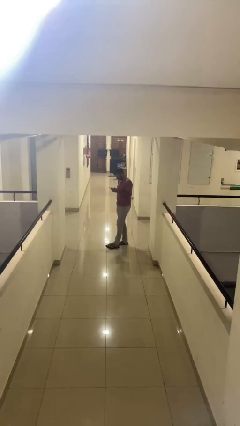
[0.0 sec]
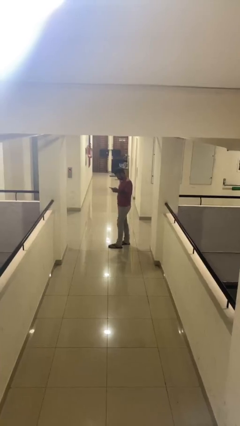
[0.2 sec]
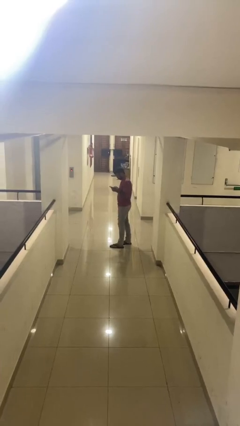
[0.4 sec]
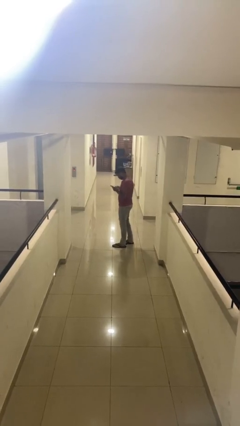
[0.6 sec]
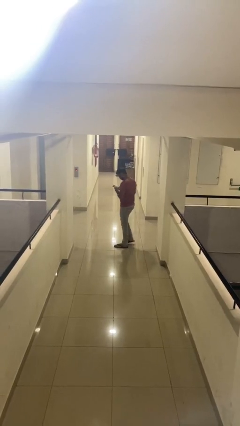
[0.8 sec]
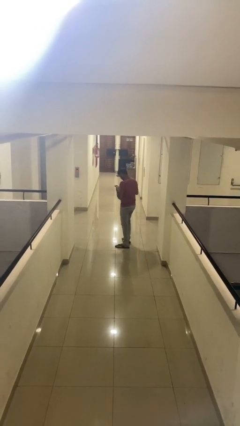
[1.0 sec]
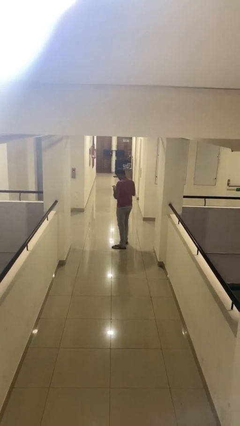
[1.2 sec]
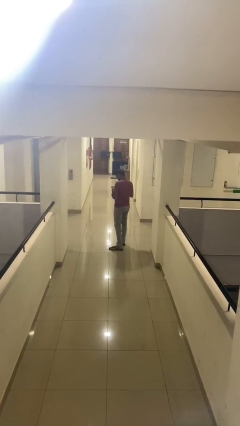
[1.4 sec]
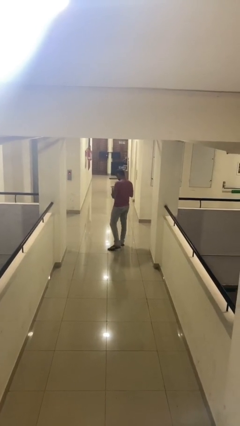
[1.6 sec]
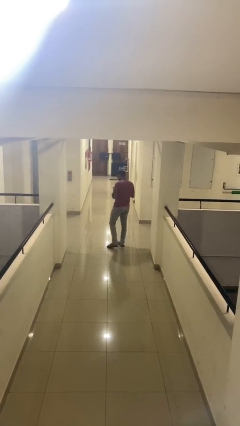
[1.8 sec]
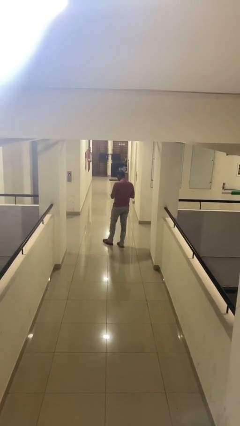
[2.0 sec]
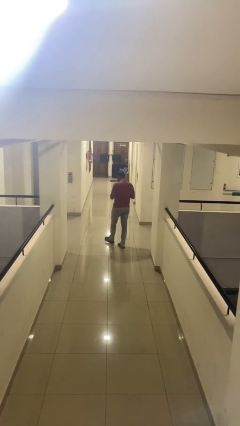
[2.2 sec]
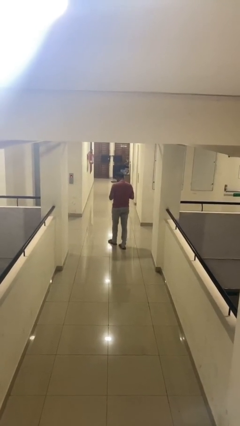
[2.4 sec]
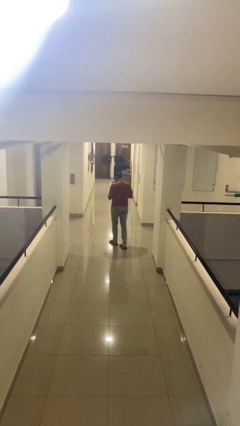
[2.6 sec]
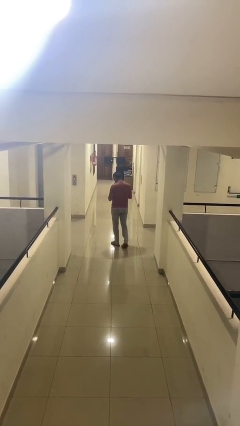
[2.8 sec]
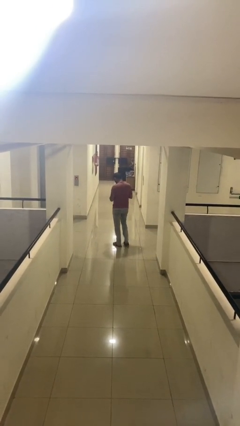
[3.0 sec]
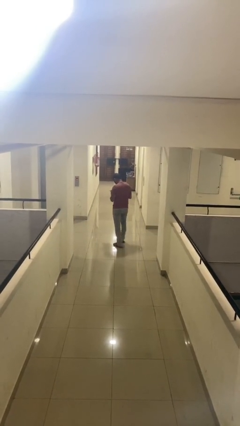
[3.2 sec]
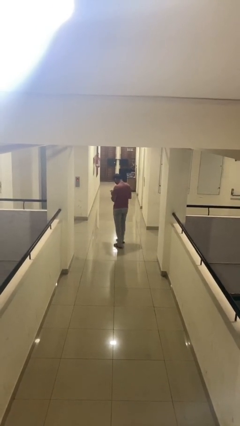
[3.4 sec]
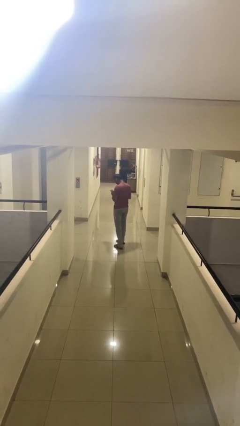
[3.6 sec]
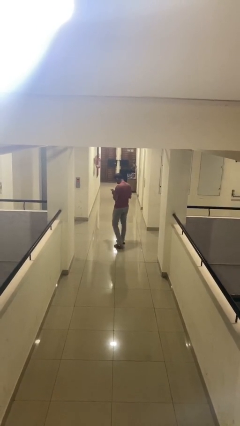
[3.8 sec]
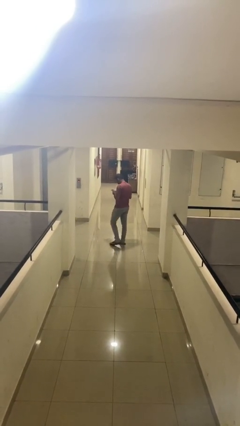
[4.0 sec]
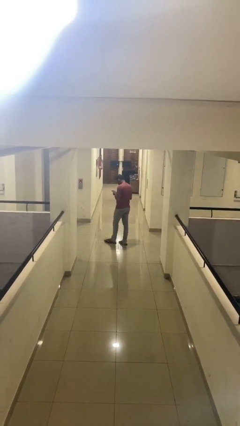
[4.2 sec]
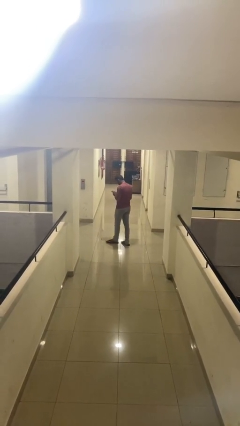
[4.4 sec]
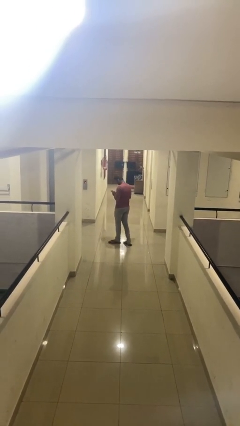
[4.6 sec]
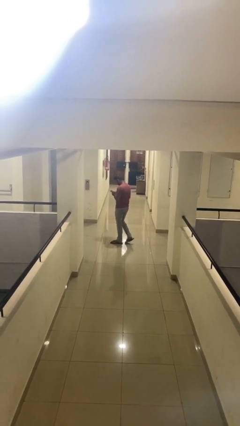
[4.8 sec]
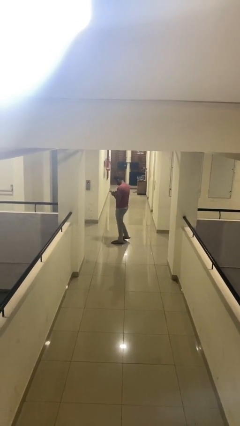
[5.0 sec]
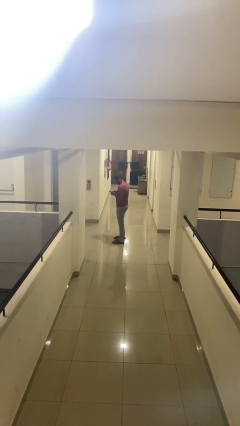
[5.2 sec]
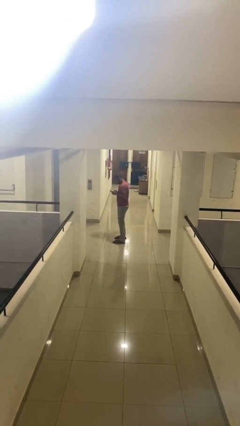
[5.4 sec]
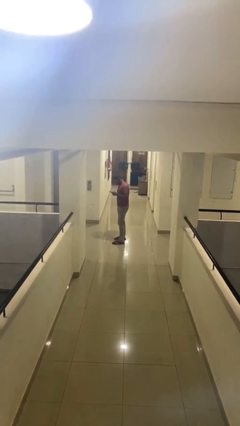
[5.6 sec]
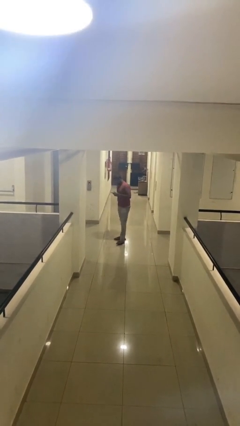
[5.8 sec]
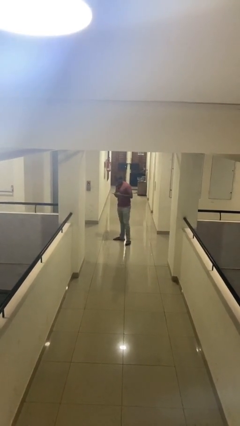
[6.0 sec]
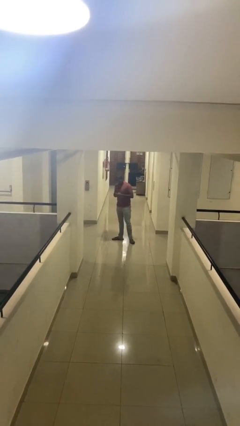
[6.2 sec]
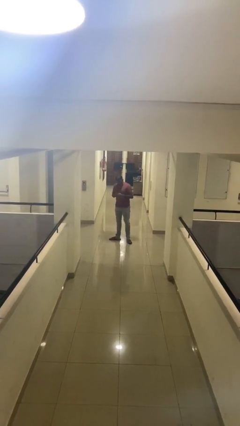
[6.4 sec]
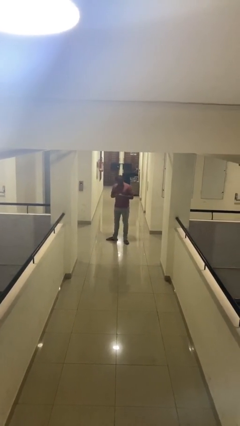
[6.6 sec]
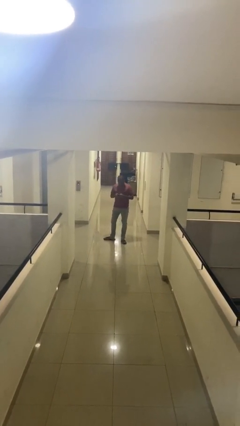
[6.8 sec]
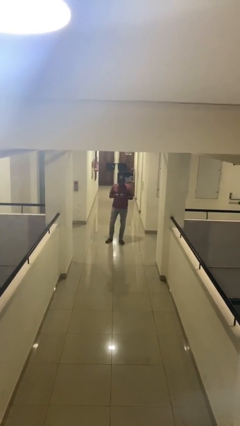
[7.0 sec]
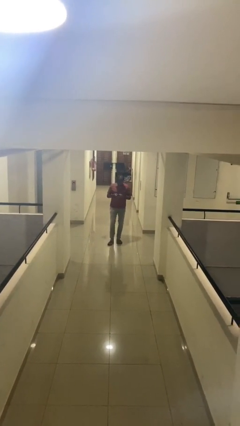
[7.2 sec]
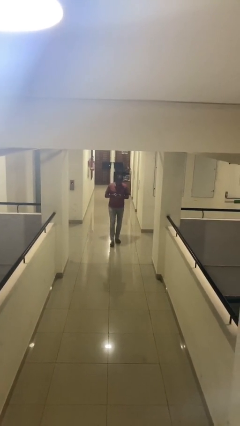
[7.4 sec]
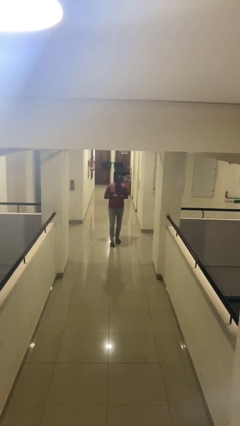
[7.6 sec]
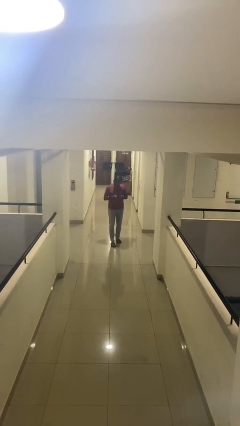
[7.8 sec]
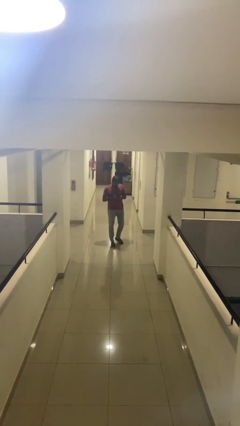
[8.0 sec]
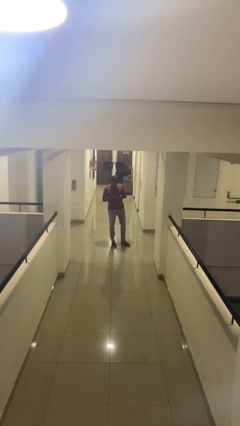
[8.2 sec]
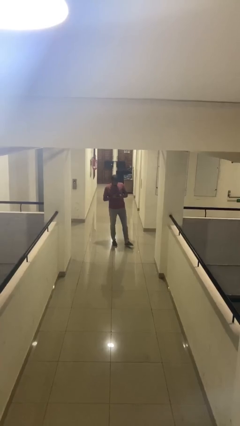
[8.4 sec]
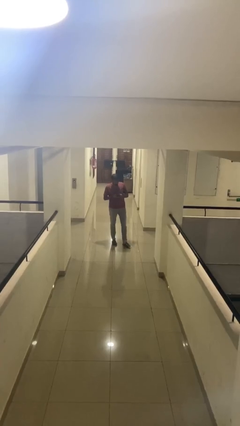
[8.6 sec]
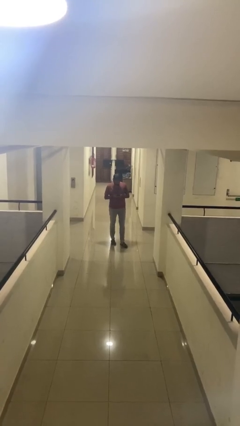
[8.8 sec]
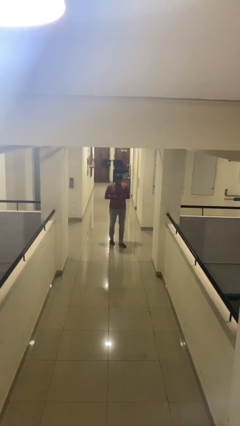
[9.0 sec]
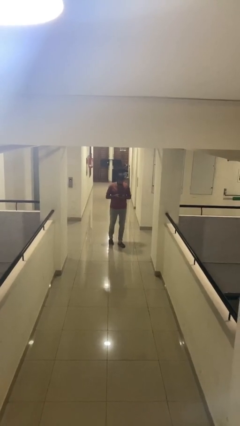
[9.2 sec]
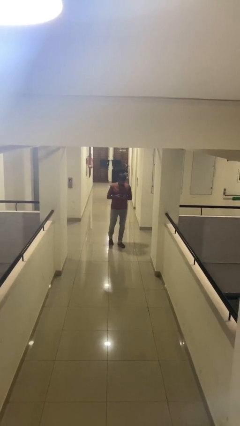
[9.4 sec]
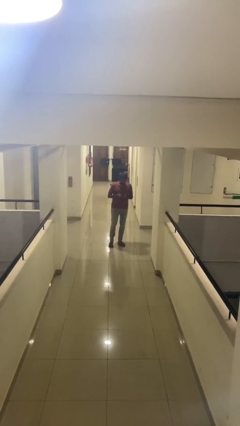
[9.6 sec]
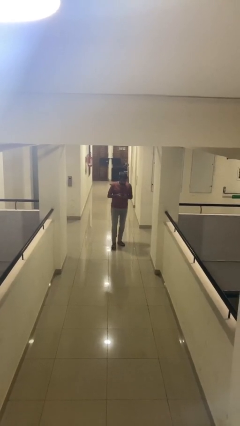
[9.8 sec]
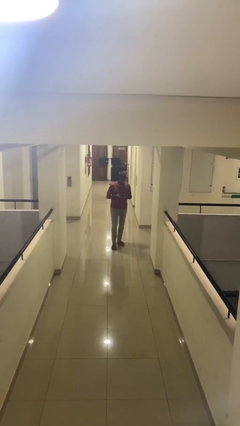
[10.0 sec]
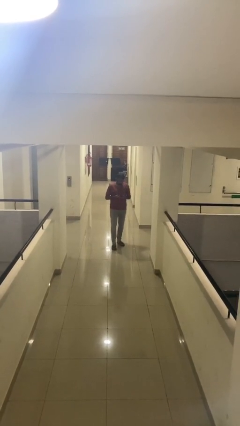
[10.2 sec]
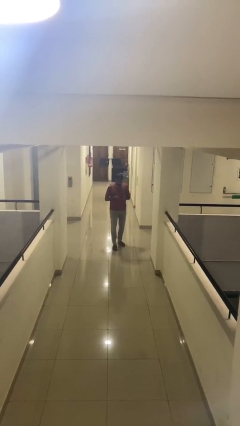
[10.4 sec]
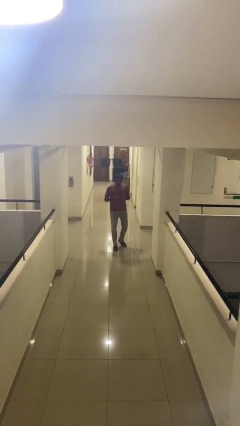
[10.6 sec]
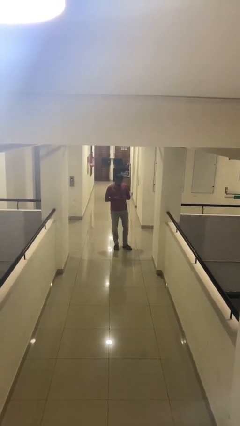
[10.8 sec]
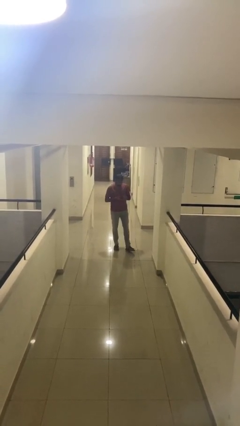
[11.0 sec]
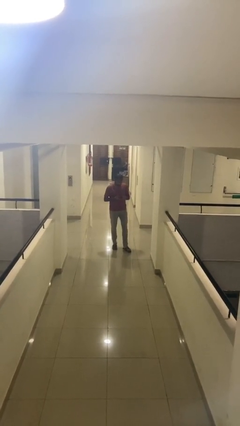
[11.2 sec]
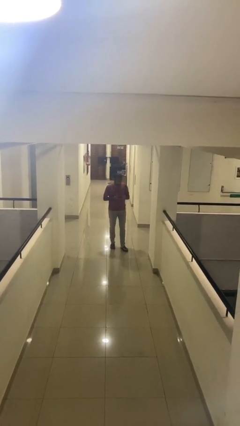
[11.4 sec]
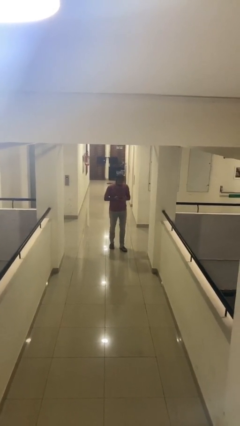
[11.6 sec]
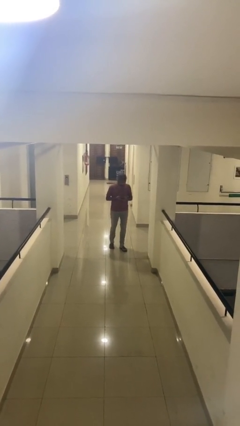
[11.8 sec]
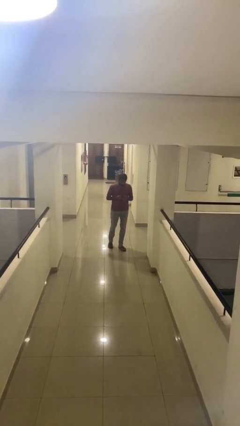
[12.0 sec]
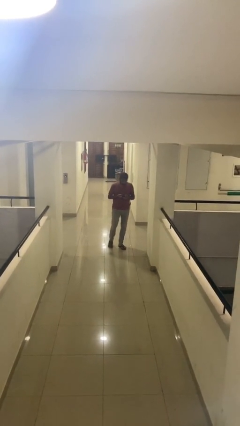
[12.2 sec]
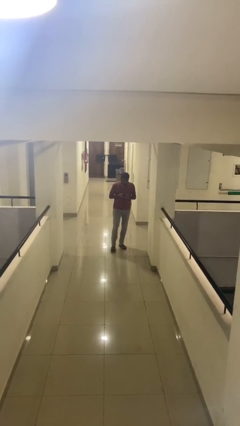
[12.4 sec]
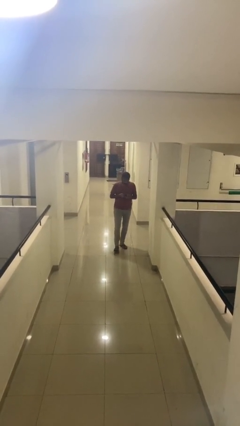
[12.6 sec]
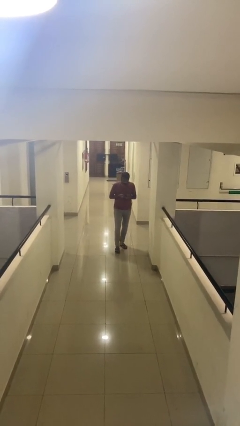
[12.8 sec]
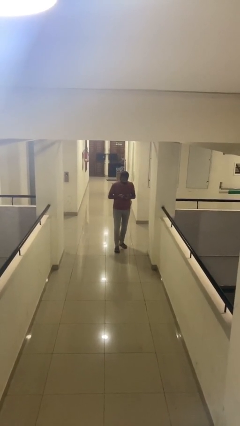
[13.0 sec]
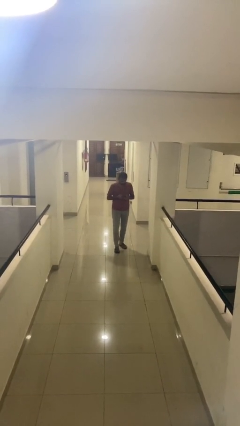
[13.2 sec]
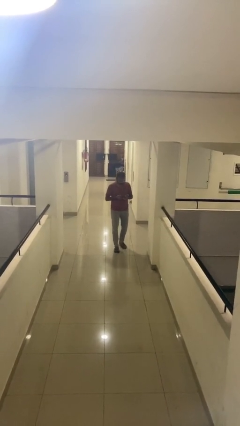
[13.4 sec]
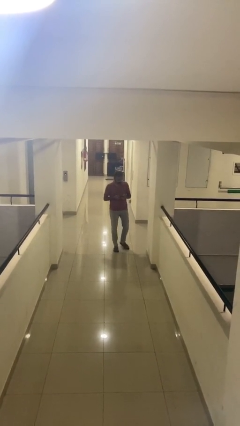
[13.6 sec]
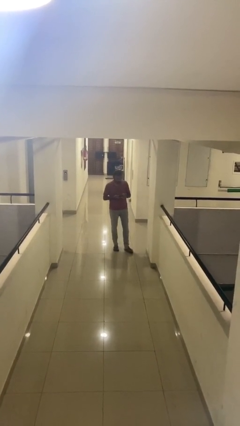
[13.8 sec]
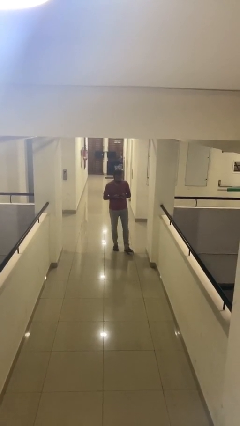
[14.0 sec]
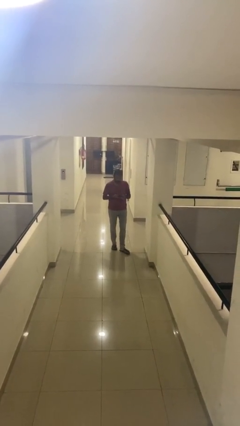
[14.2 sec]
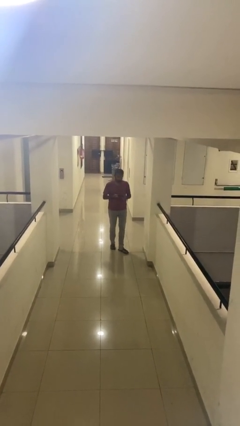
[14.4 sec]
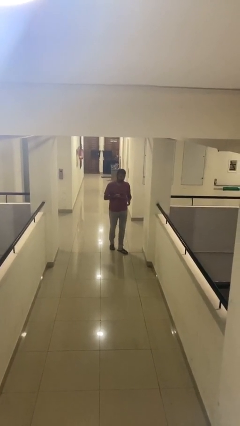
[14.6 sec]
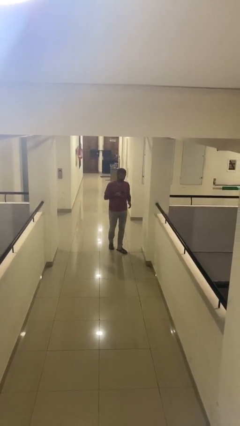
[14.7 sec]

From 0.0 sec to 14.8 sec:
person texts on phone

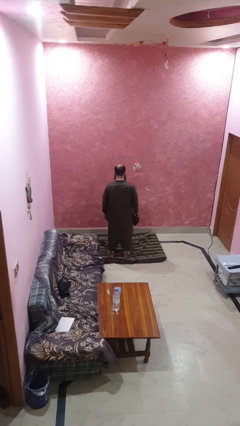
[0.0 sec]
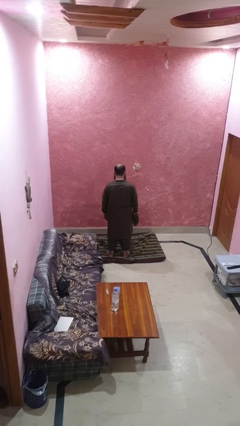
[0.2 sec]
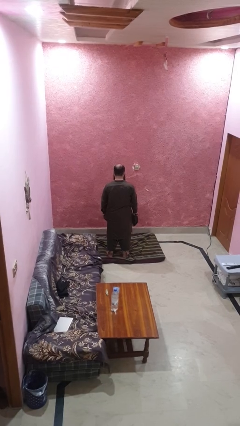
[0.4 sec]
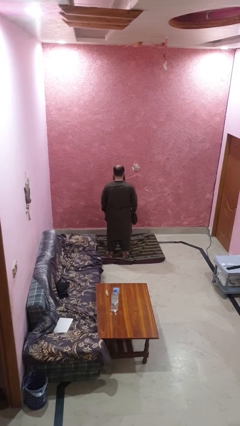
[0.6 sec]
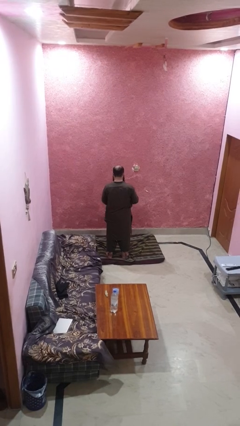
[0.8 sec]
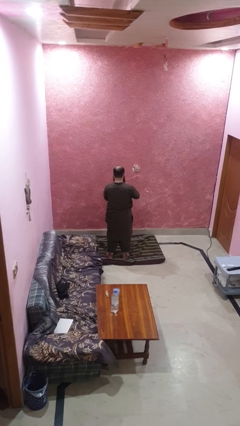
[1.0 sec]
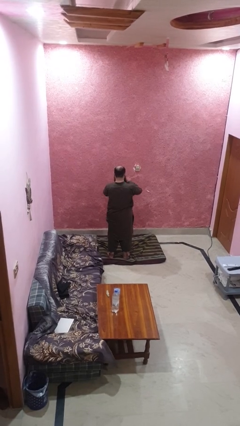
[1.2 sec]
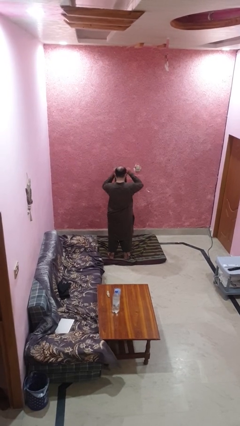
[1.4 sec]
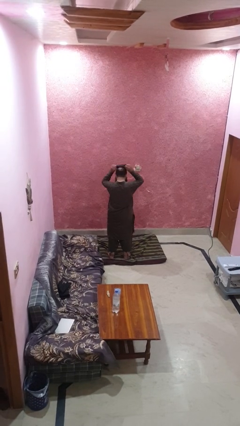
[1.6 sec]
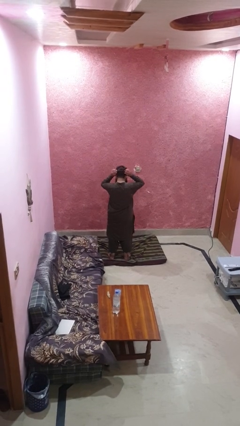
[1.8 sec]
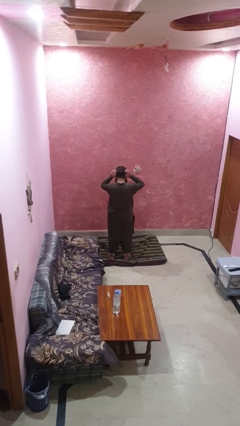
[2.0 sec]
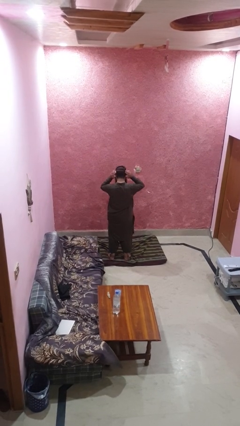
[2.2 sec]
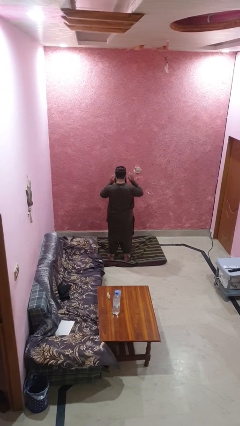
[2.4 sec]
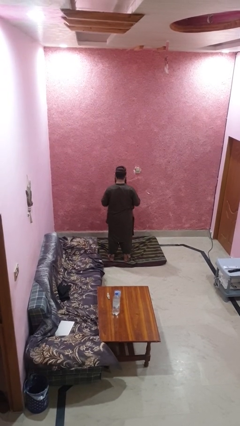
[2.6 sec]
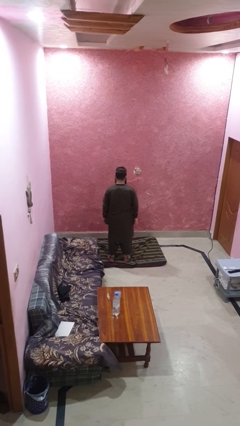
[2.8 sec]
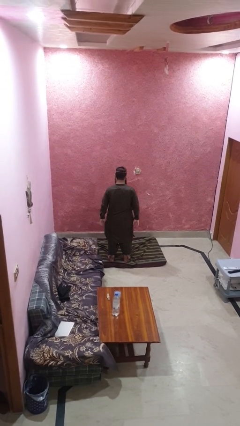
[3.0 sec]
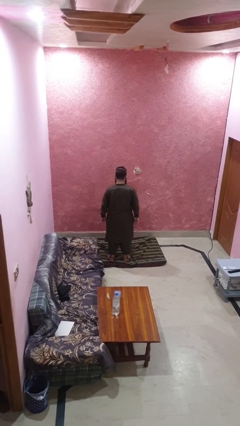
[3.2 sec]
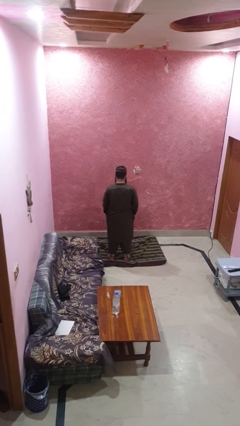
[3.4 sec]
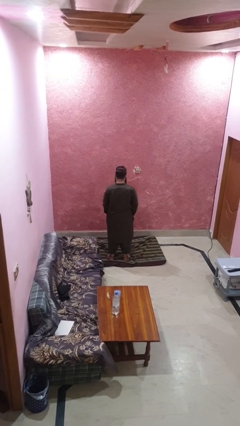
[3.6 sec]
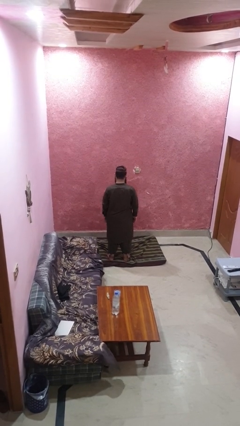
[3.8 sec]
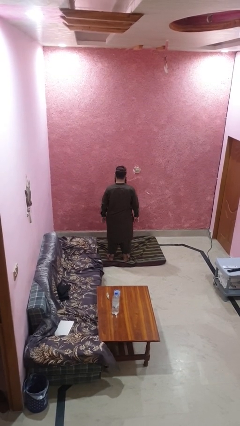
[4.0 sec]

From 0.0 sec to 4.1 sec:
person puts on hat
